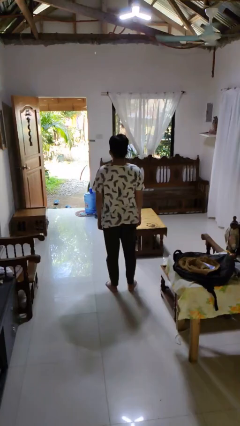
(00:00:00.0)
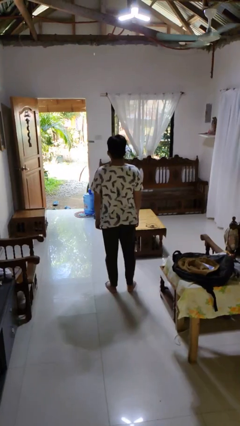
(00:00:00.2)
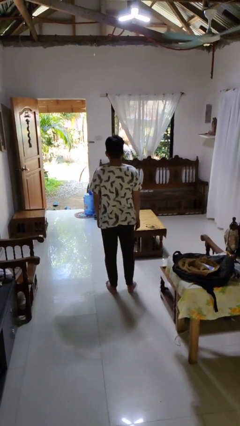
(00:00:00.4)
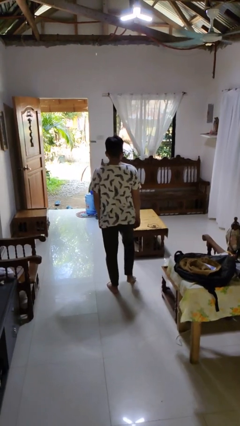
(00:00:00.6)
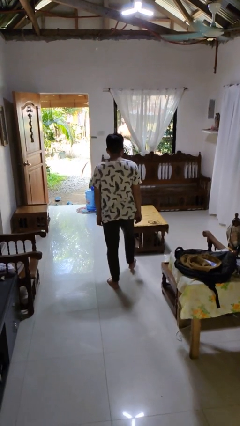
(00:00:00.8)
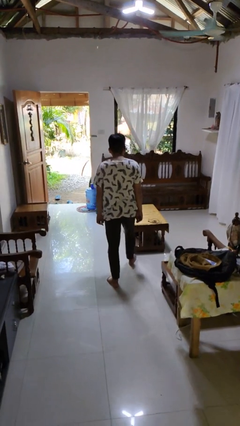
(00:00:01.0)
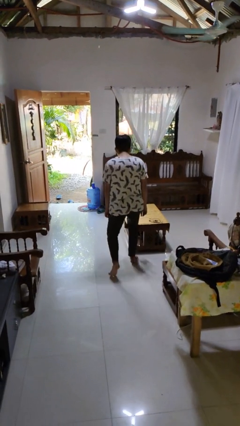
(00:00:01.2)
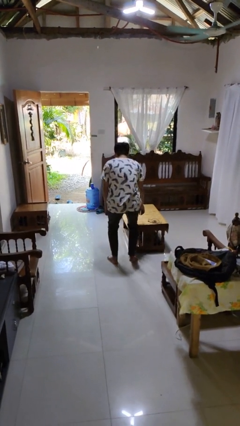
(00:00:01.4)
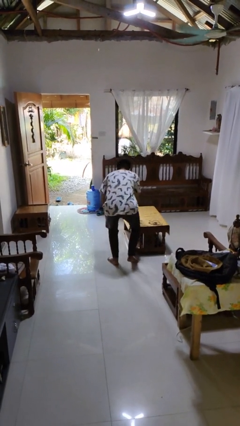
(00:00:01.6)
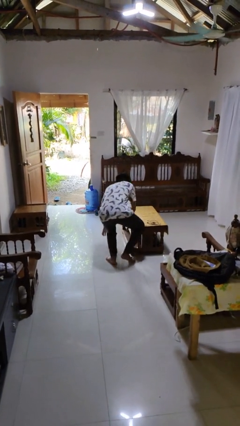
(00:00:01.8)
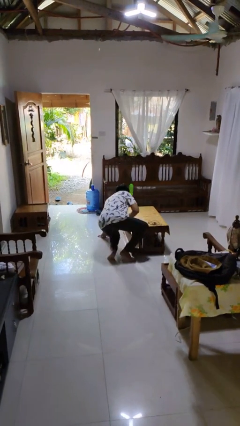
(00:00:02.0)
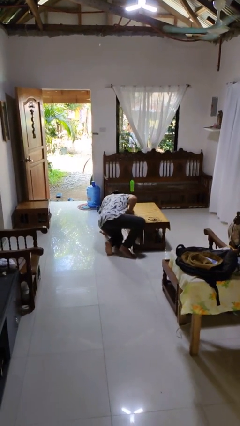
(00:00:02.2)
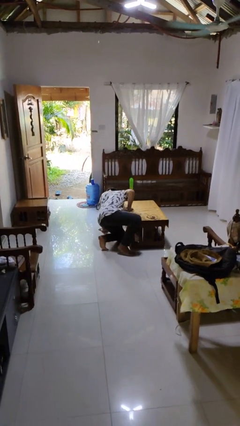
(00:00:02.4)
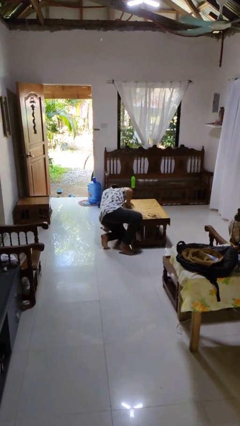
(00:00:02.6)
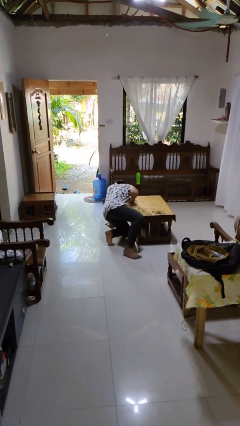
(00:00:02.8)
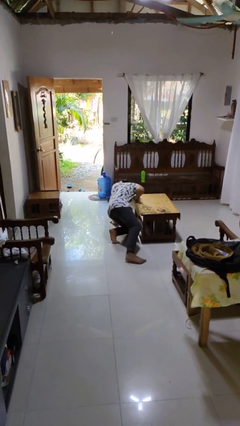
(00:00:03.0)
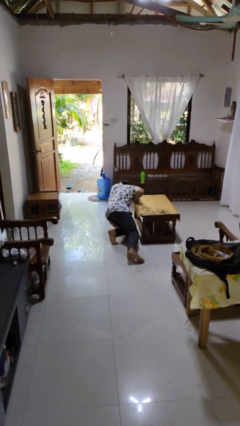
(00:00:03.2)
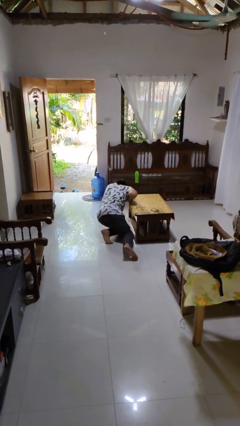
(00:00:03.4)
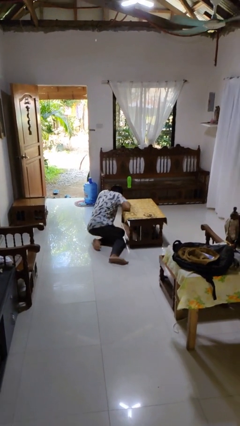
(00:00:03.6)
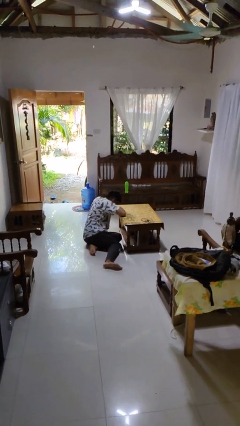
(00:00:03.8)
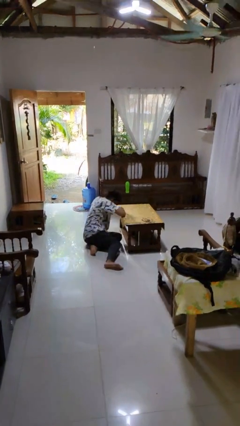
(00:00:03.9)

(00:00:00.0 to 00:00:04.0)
person trips on object on floor

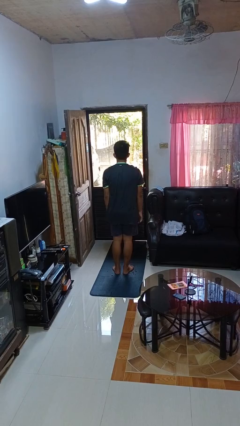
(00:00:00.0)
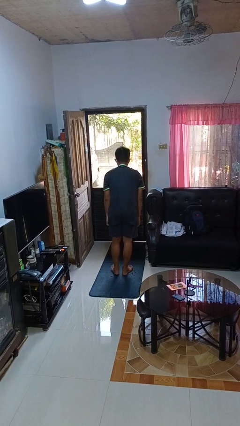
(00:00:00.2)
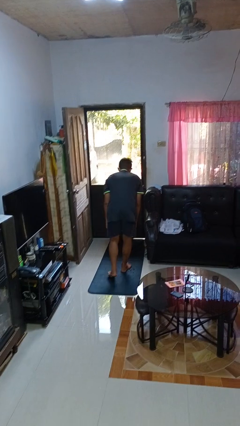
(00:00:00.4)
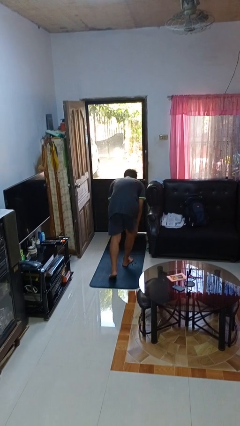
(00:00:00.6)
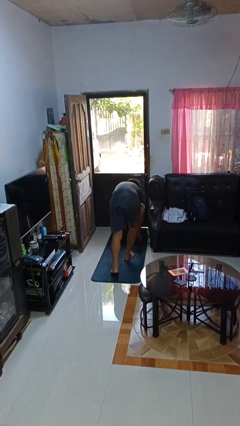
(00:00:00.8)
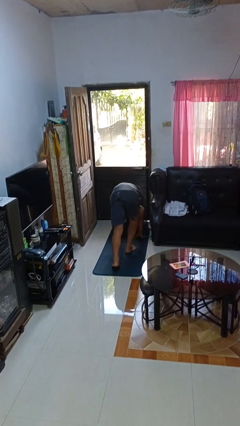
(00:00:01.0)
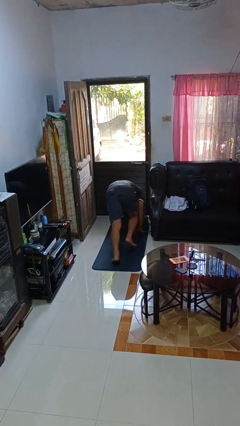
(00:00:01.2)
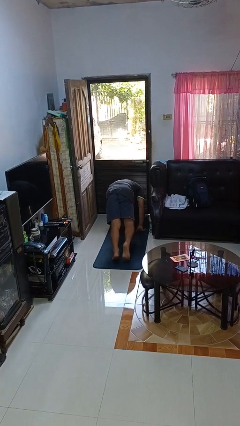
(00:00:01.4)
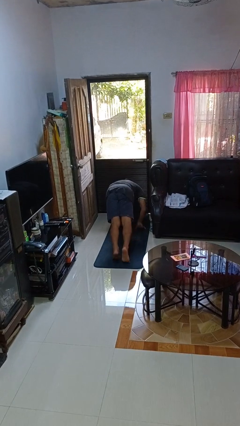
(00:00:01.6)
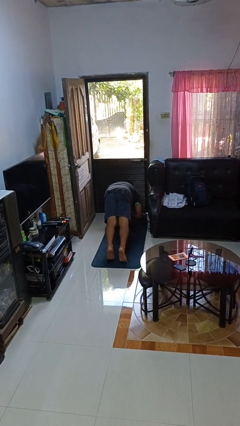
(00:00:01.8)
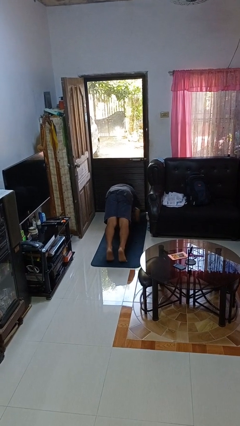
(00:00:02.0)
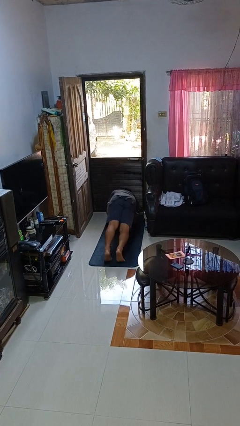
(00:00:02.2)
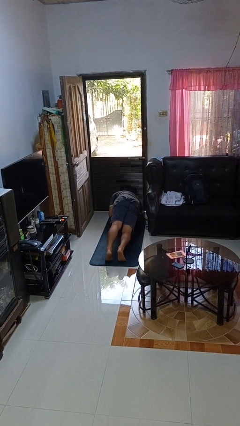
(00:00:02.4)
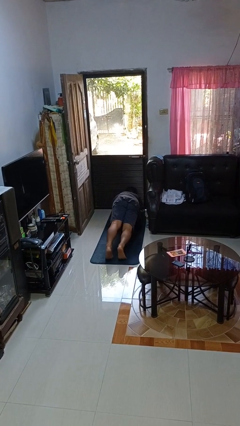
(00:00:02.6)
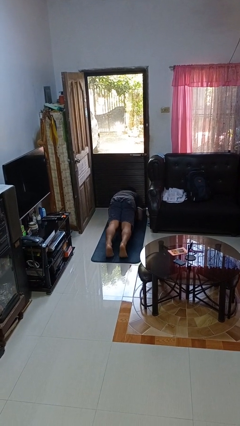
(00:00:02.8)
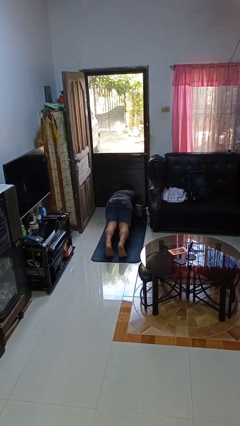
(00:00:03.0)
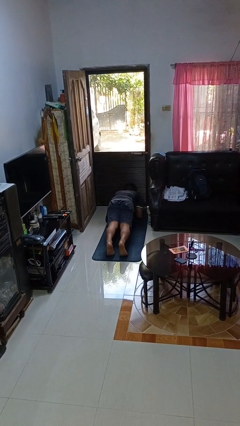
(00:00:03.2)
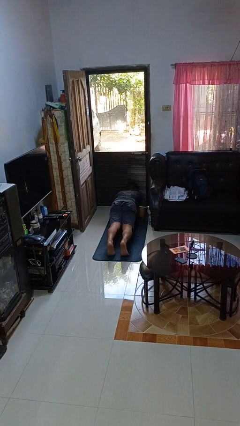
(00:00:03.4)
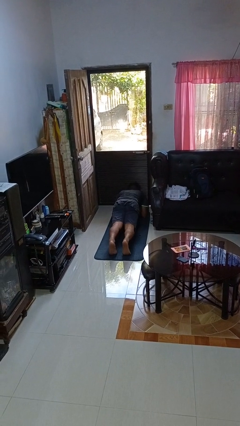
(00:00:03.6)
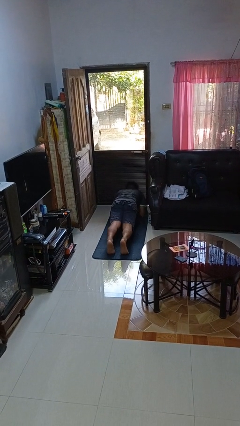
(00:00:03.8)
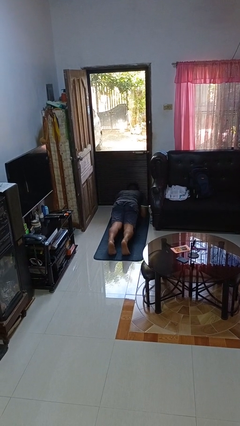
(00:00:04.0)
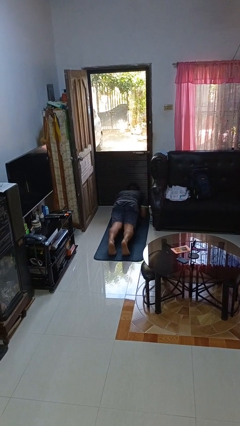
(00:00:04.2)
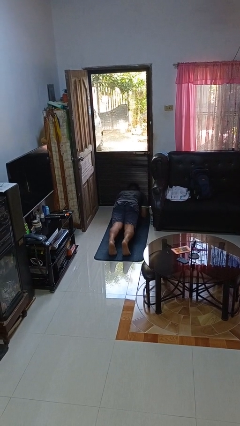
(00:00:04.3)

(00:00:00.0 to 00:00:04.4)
person exercises with plank

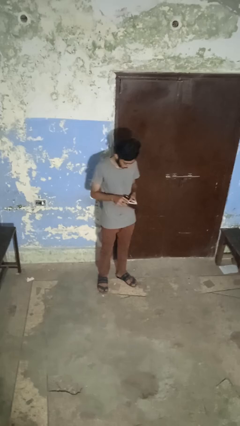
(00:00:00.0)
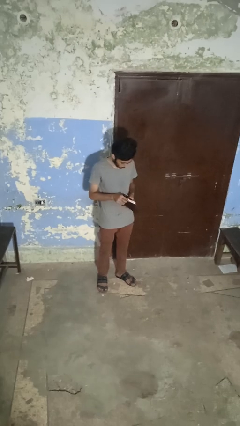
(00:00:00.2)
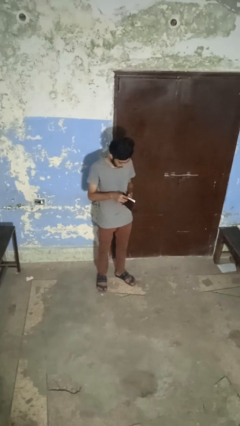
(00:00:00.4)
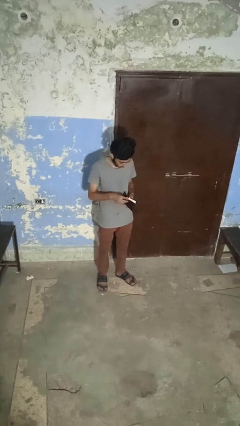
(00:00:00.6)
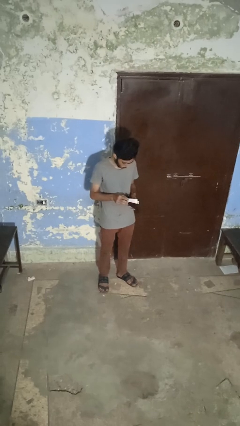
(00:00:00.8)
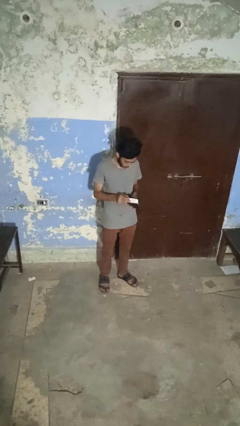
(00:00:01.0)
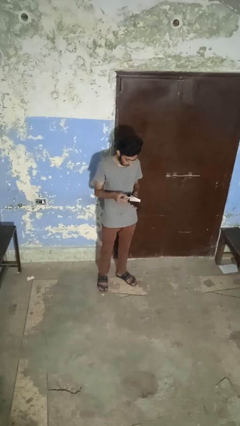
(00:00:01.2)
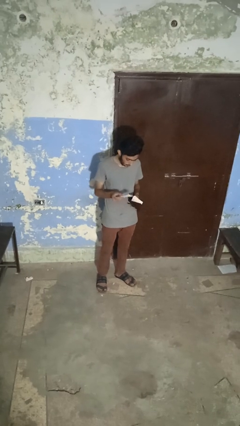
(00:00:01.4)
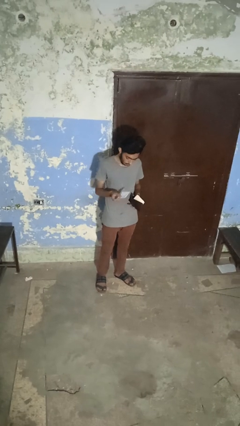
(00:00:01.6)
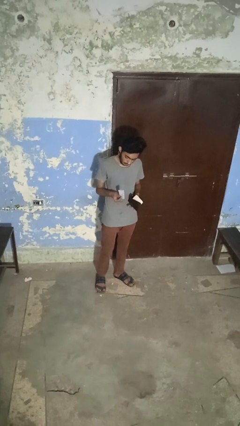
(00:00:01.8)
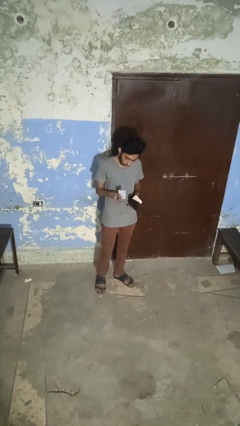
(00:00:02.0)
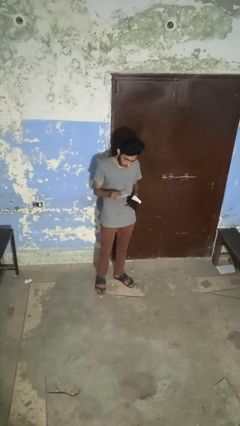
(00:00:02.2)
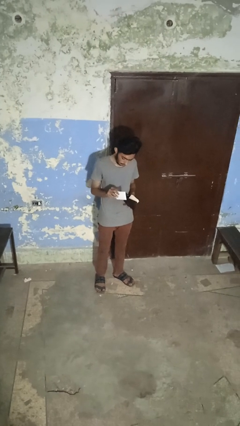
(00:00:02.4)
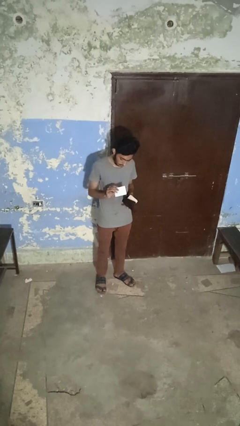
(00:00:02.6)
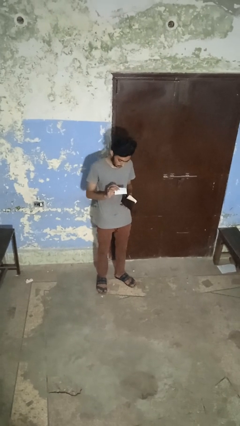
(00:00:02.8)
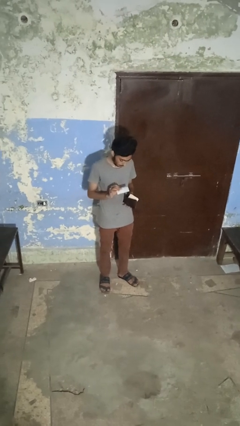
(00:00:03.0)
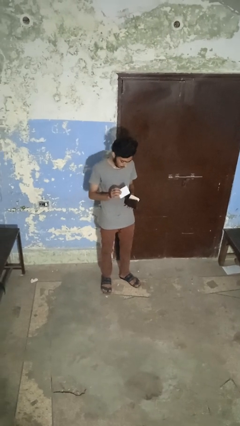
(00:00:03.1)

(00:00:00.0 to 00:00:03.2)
person takes object from purse

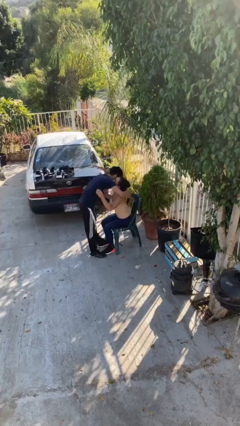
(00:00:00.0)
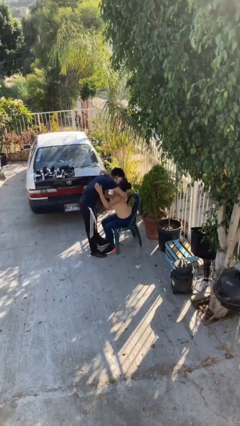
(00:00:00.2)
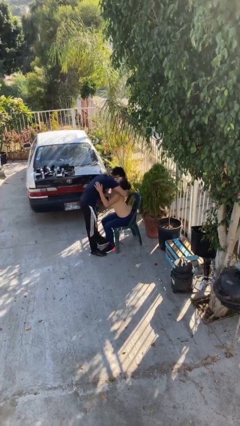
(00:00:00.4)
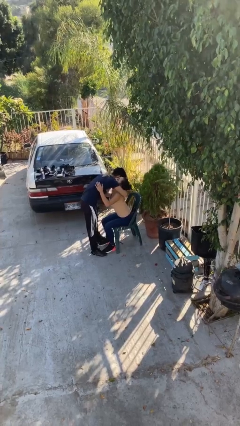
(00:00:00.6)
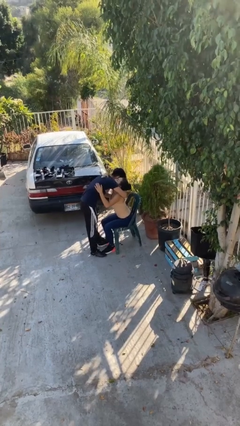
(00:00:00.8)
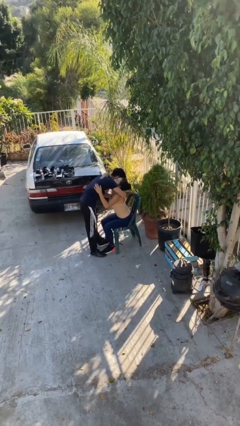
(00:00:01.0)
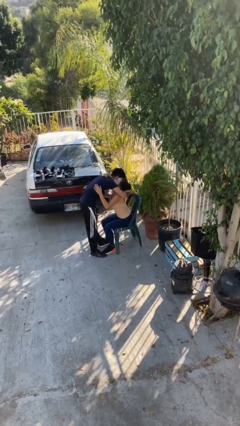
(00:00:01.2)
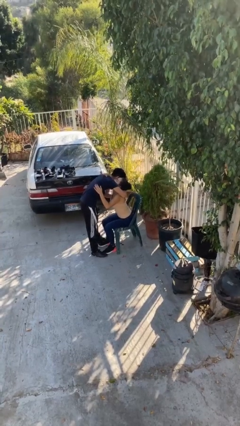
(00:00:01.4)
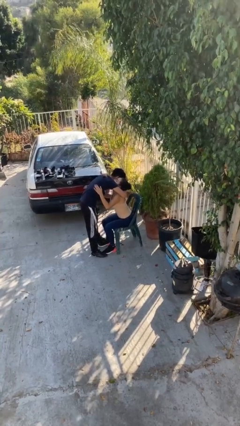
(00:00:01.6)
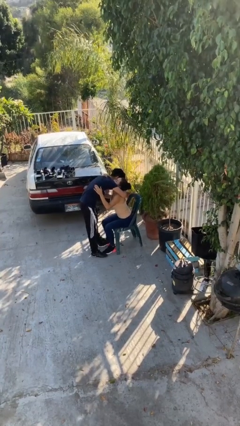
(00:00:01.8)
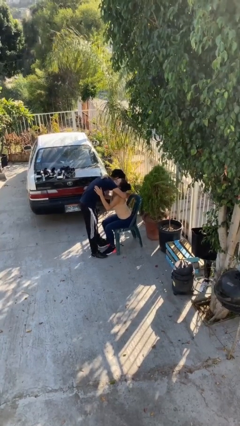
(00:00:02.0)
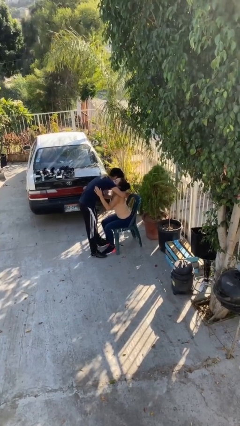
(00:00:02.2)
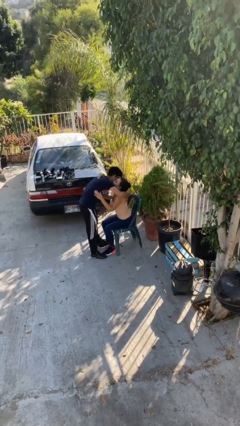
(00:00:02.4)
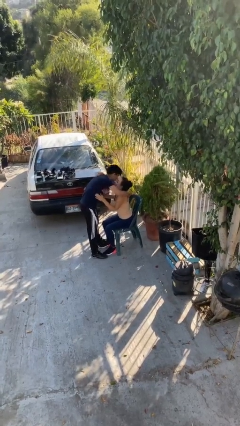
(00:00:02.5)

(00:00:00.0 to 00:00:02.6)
person embraces person

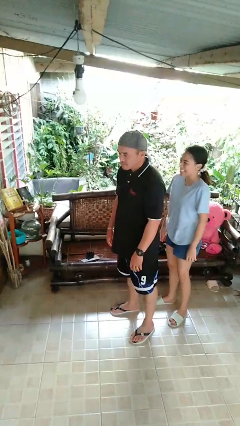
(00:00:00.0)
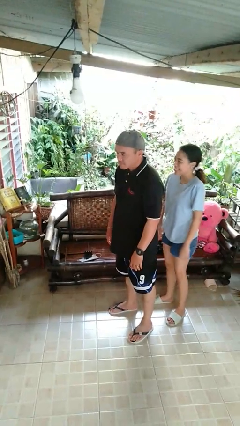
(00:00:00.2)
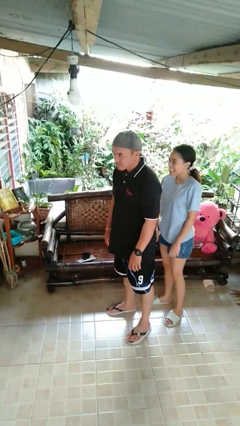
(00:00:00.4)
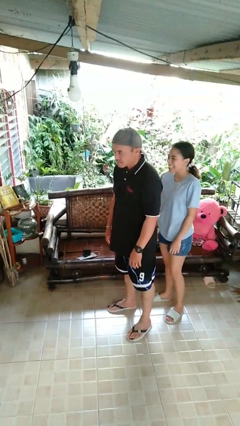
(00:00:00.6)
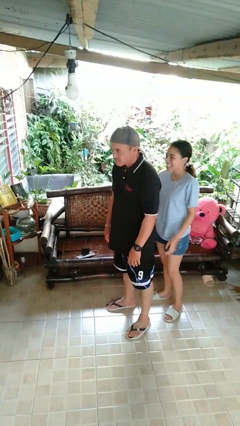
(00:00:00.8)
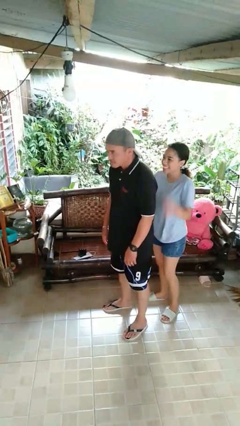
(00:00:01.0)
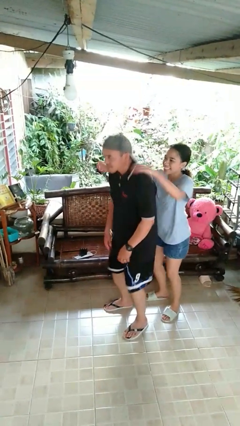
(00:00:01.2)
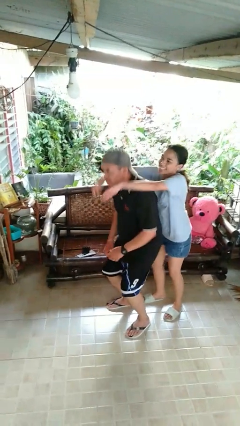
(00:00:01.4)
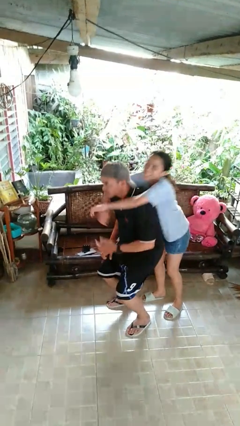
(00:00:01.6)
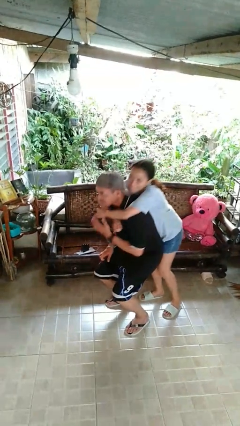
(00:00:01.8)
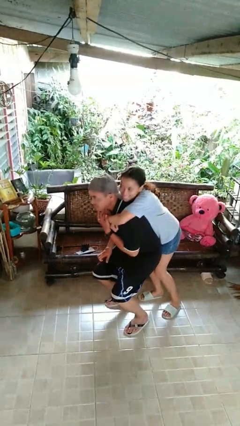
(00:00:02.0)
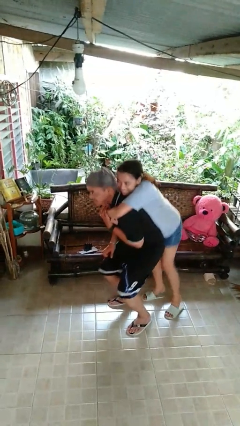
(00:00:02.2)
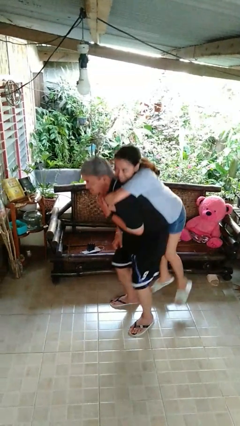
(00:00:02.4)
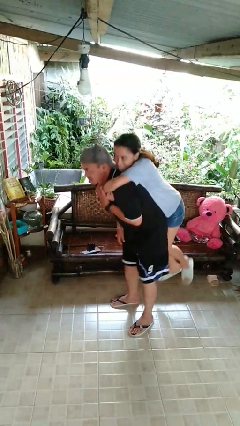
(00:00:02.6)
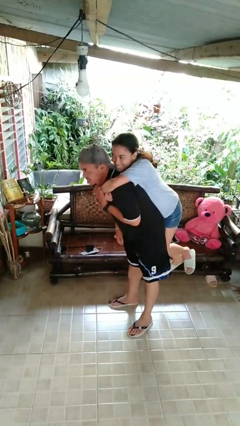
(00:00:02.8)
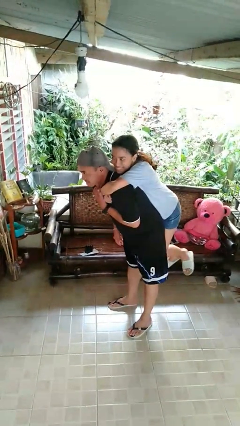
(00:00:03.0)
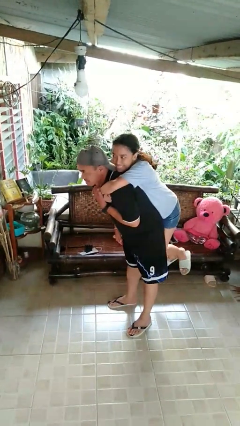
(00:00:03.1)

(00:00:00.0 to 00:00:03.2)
person picks up person

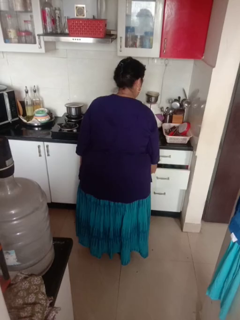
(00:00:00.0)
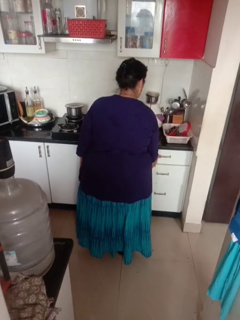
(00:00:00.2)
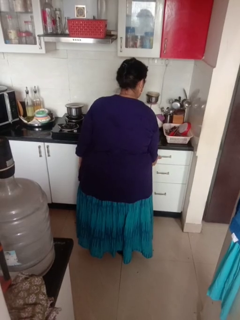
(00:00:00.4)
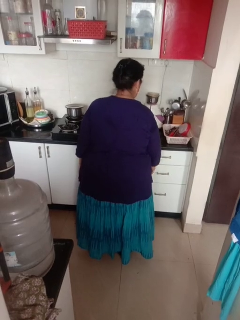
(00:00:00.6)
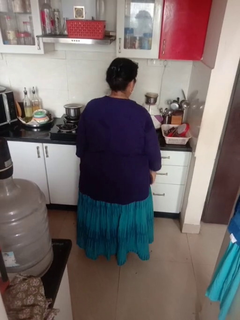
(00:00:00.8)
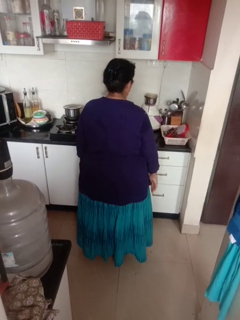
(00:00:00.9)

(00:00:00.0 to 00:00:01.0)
person closes kitchen drawer
